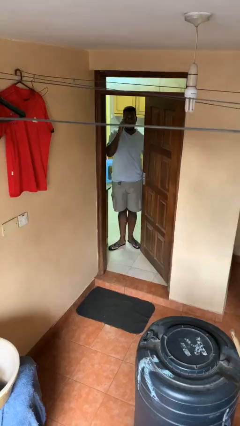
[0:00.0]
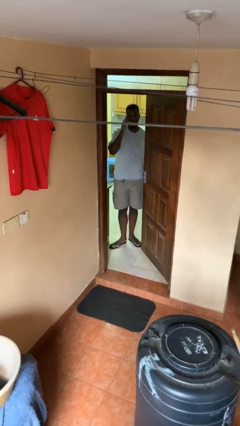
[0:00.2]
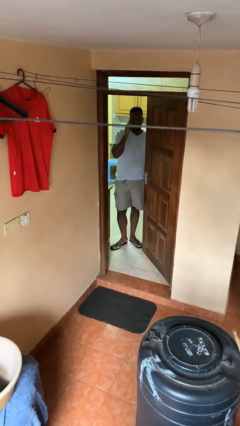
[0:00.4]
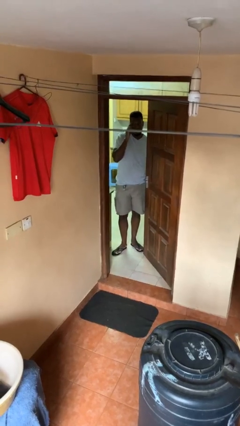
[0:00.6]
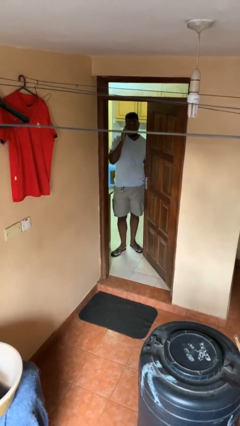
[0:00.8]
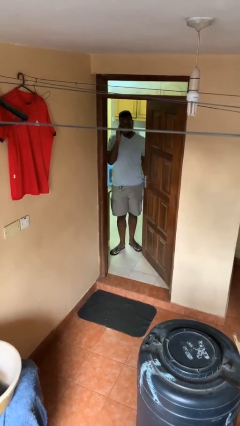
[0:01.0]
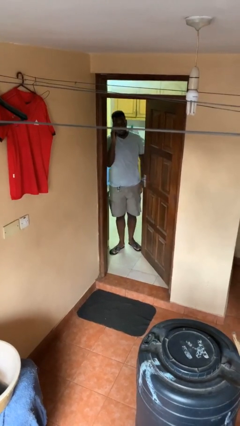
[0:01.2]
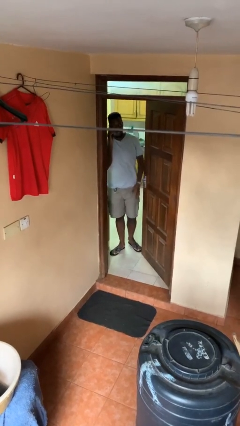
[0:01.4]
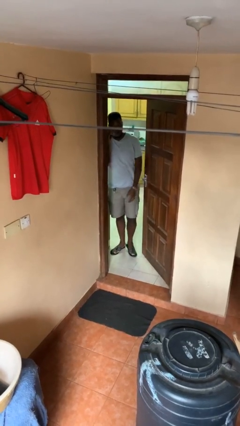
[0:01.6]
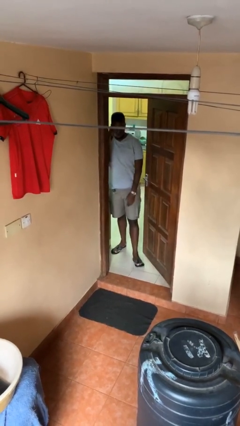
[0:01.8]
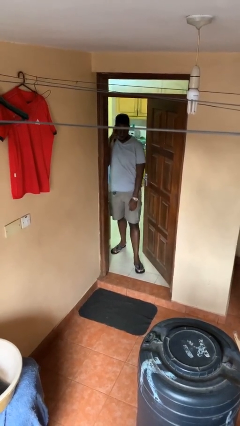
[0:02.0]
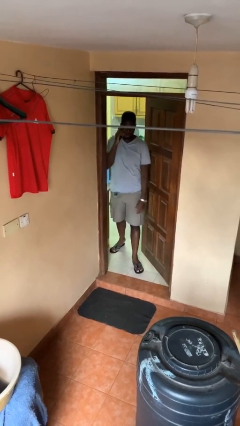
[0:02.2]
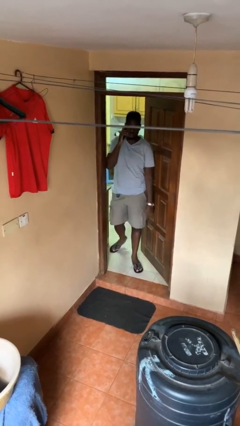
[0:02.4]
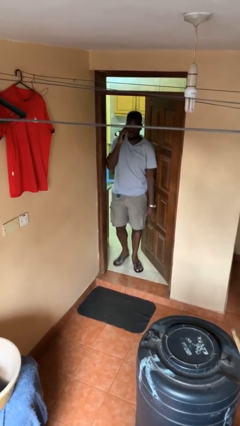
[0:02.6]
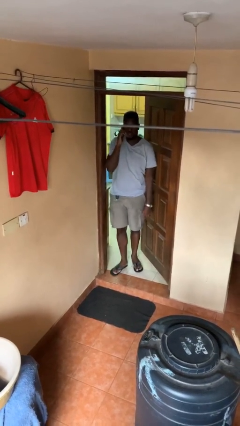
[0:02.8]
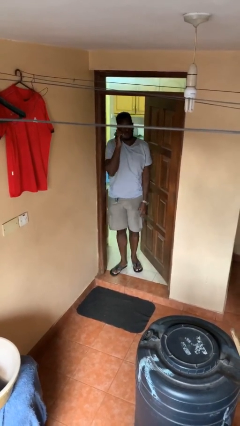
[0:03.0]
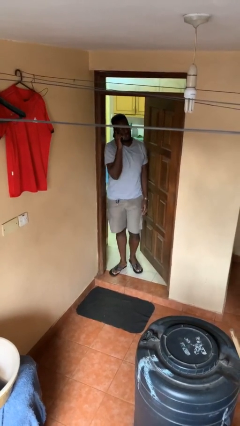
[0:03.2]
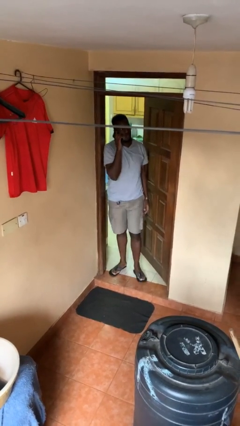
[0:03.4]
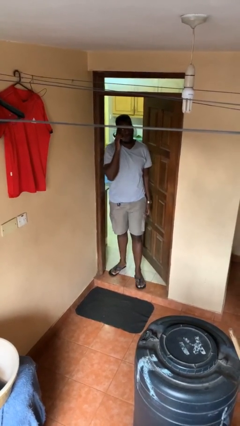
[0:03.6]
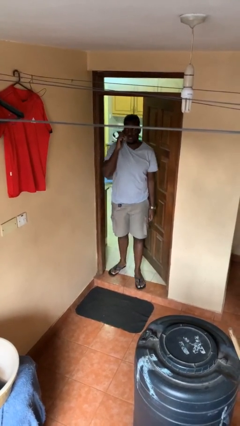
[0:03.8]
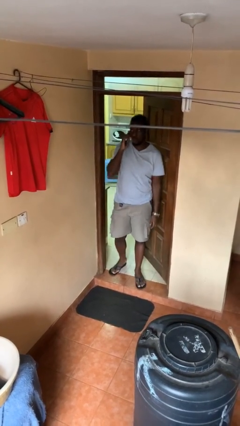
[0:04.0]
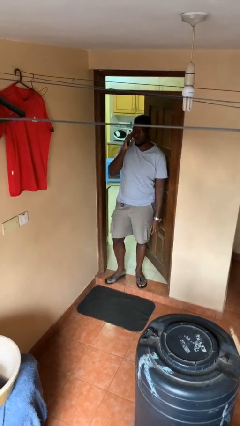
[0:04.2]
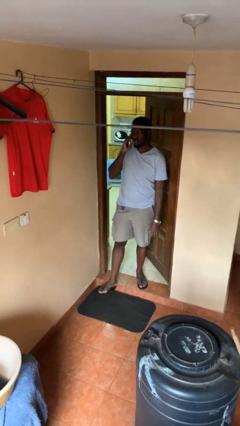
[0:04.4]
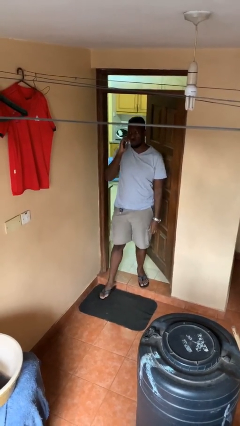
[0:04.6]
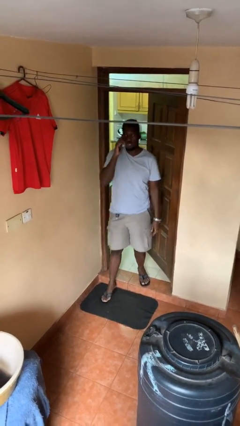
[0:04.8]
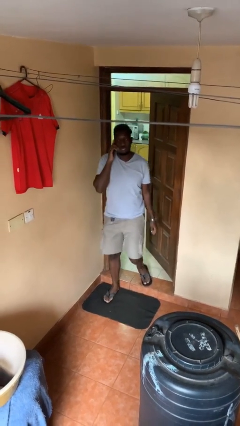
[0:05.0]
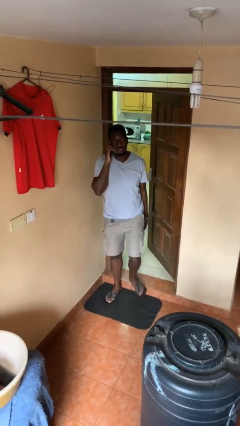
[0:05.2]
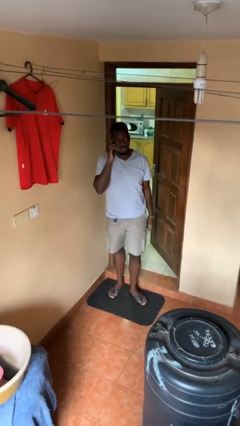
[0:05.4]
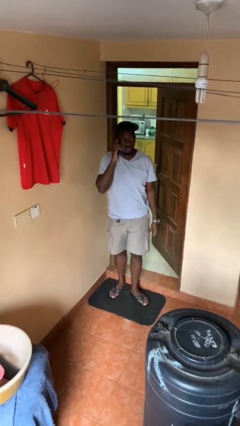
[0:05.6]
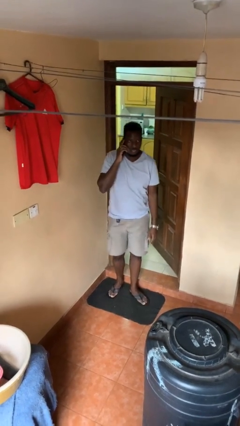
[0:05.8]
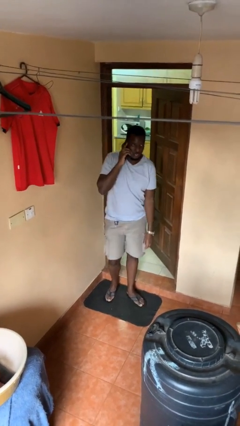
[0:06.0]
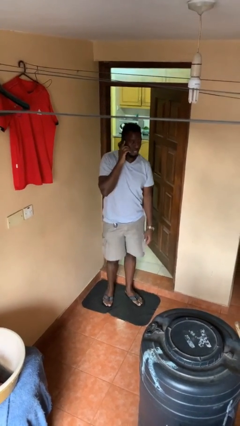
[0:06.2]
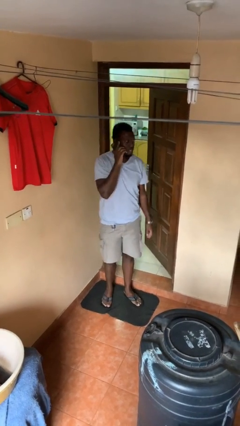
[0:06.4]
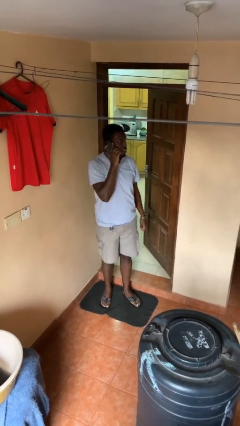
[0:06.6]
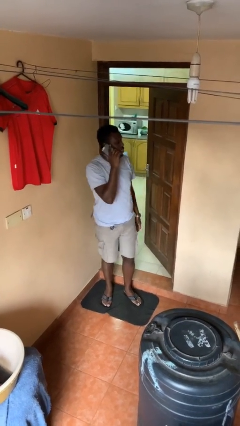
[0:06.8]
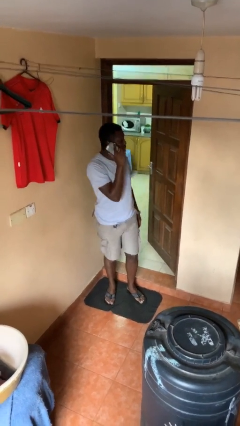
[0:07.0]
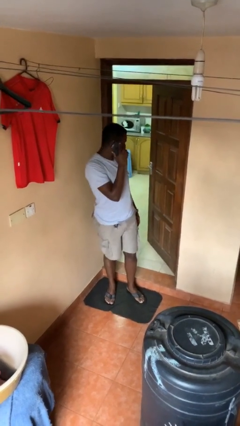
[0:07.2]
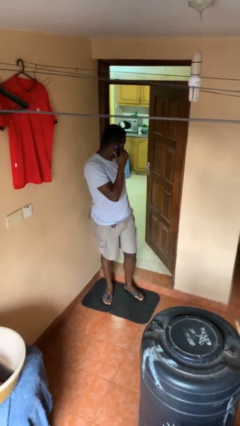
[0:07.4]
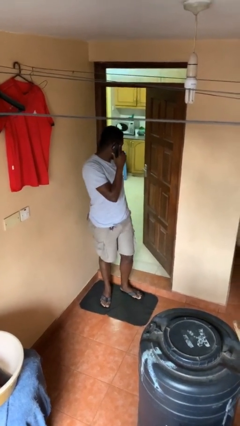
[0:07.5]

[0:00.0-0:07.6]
person enters scene through structure

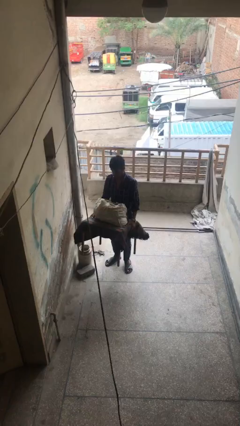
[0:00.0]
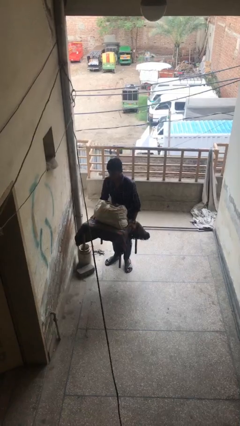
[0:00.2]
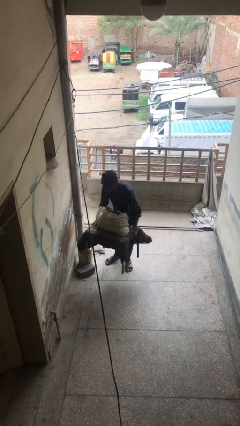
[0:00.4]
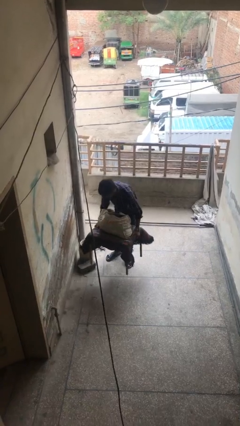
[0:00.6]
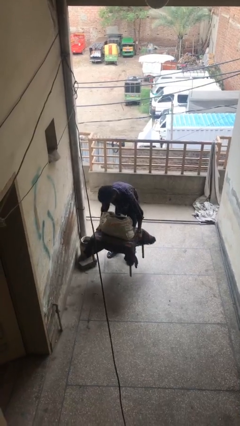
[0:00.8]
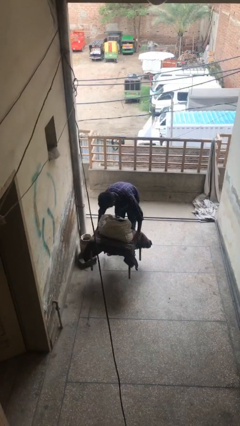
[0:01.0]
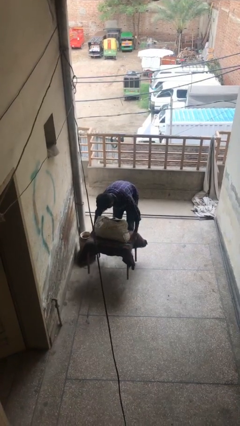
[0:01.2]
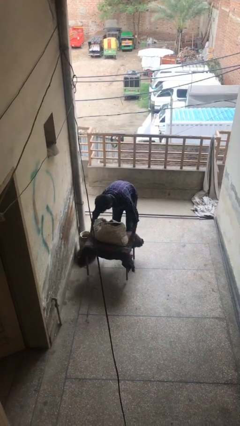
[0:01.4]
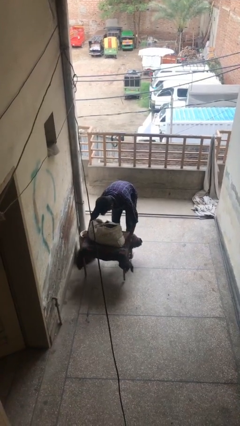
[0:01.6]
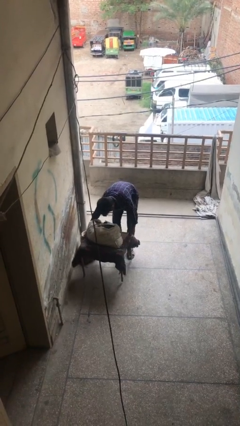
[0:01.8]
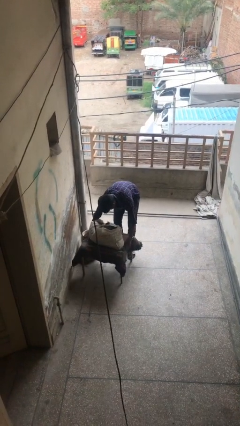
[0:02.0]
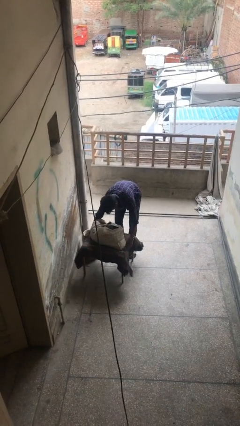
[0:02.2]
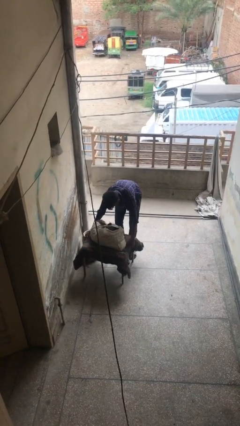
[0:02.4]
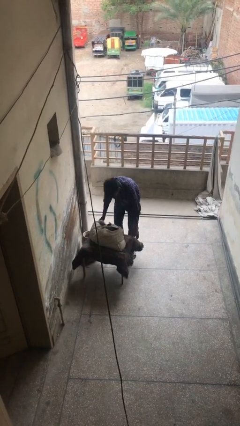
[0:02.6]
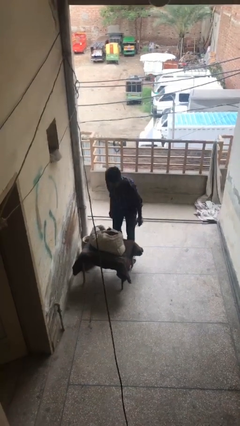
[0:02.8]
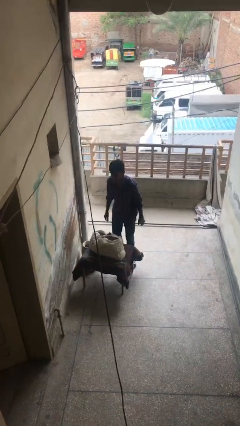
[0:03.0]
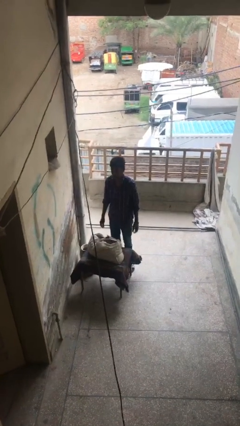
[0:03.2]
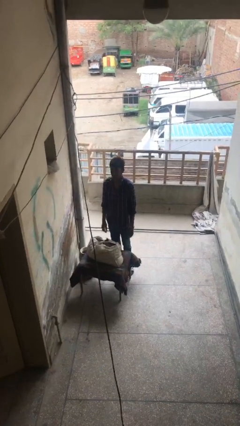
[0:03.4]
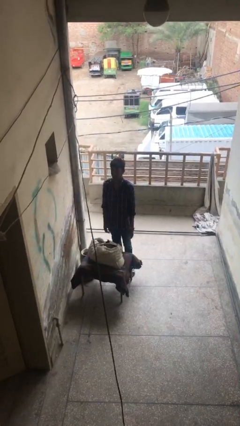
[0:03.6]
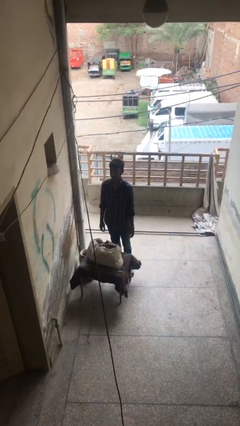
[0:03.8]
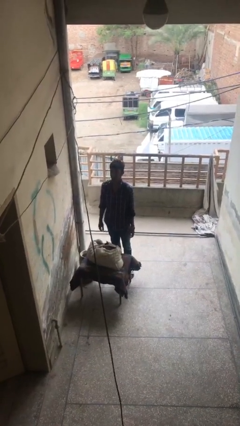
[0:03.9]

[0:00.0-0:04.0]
person puts down object on floor

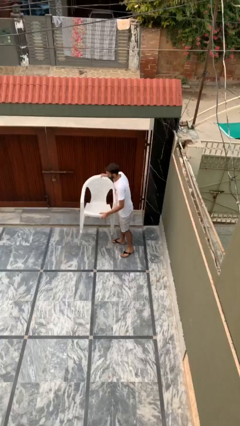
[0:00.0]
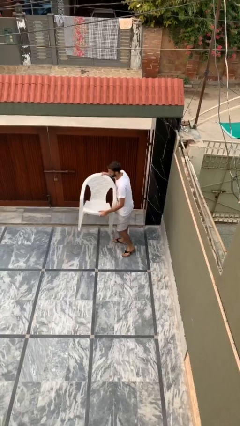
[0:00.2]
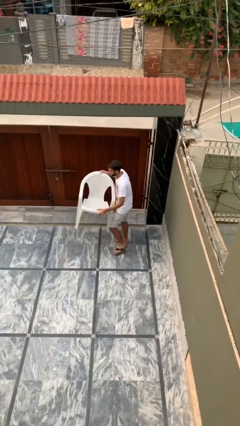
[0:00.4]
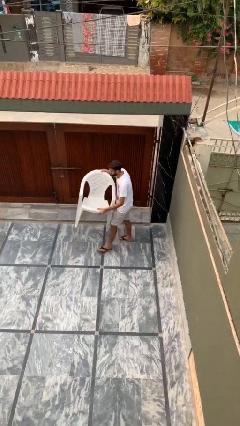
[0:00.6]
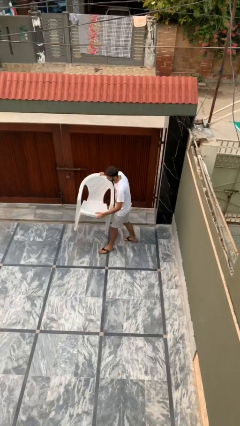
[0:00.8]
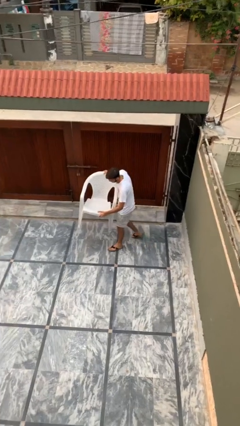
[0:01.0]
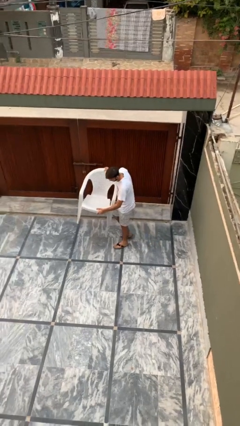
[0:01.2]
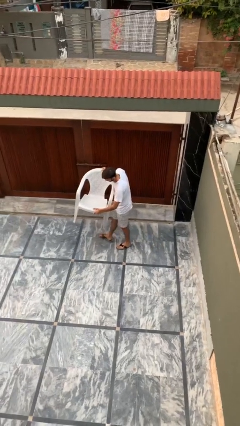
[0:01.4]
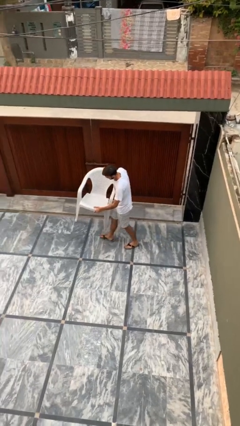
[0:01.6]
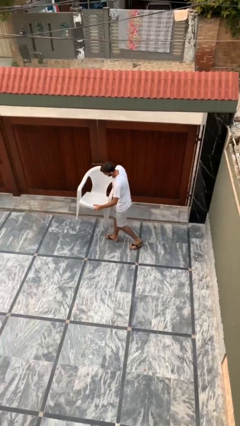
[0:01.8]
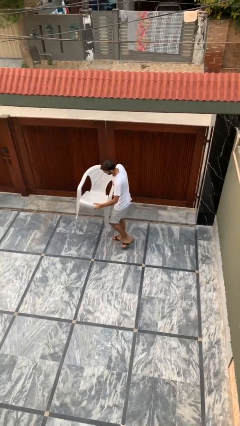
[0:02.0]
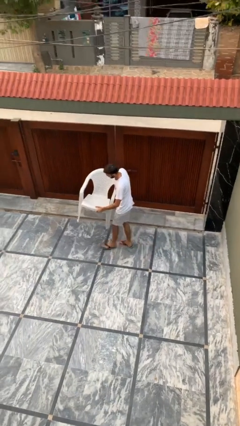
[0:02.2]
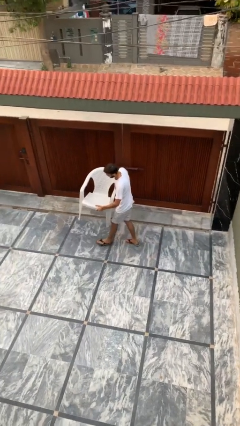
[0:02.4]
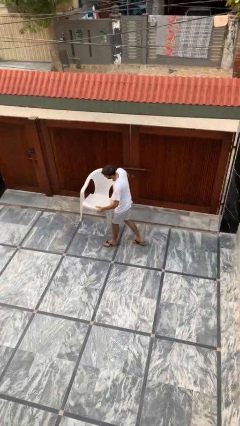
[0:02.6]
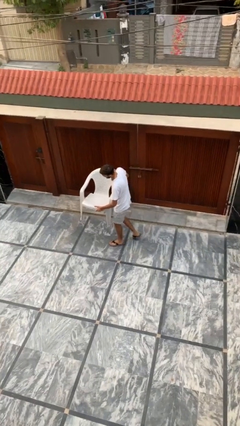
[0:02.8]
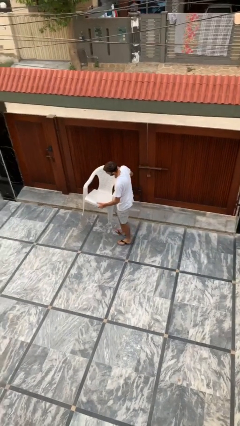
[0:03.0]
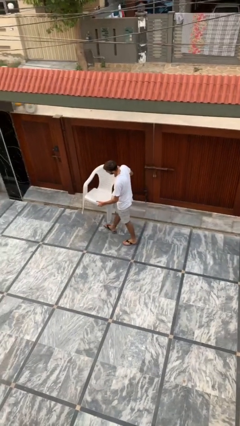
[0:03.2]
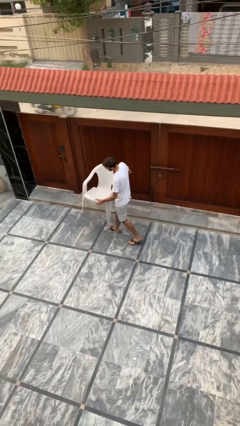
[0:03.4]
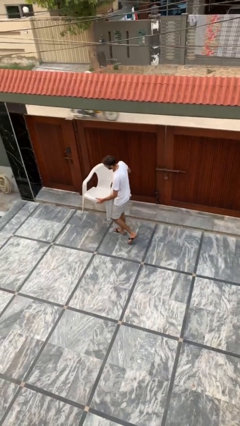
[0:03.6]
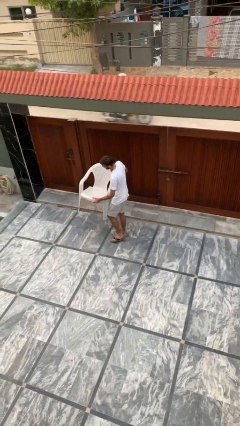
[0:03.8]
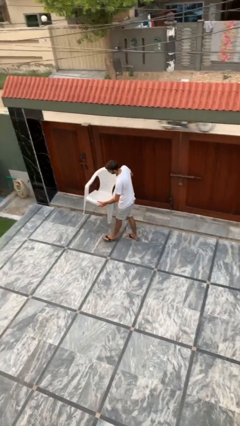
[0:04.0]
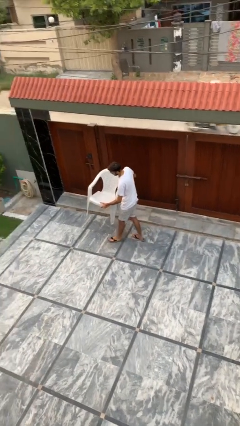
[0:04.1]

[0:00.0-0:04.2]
person carries heavy object

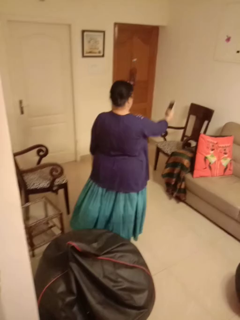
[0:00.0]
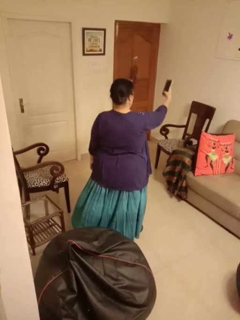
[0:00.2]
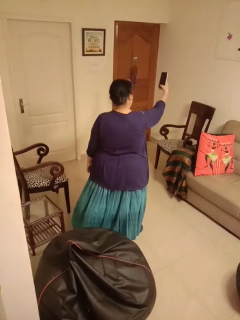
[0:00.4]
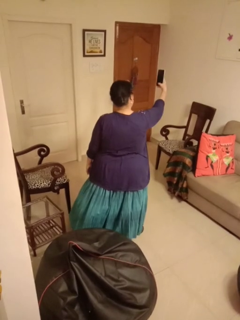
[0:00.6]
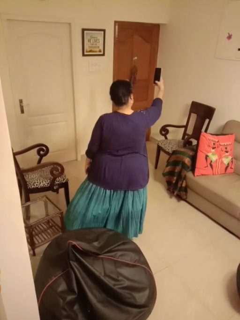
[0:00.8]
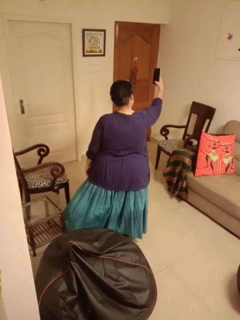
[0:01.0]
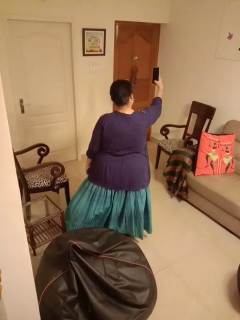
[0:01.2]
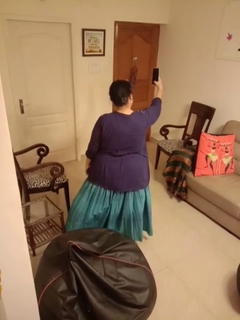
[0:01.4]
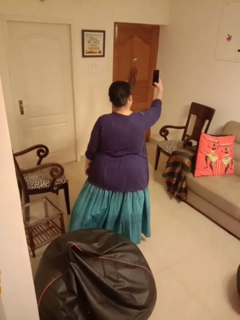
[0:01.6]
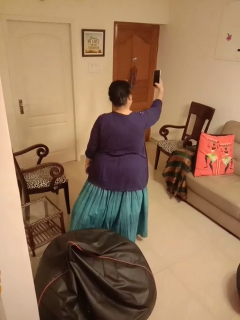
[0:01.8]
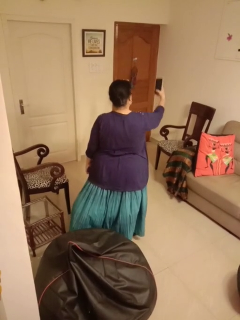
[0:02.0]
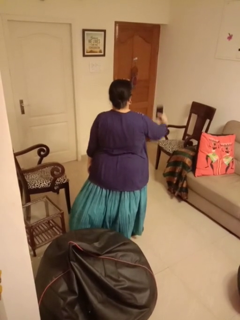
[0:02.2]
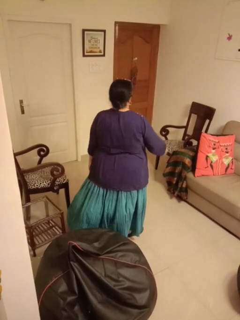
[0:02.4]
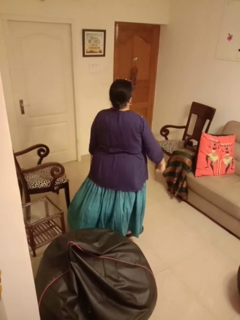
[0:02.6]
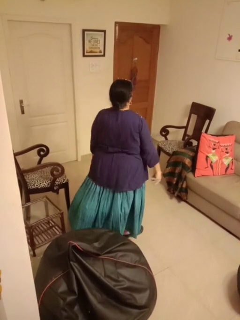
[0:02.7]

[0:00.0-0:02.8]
person takes selfie
